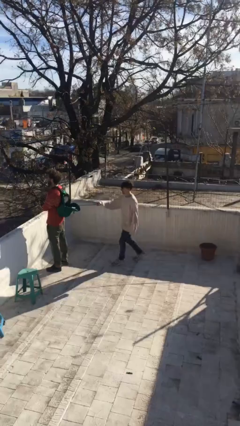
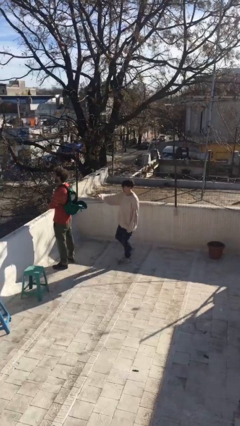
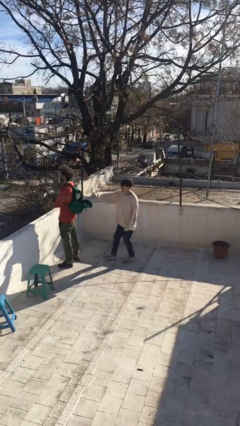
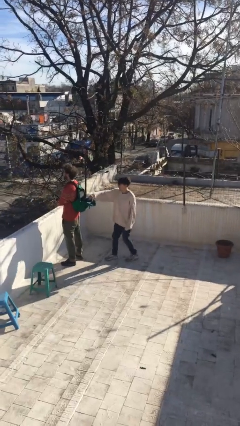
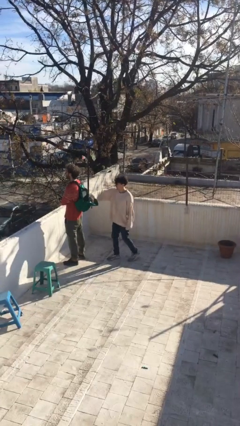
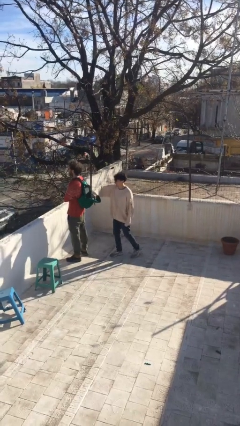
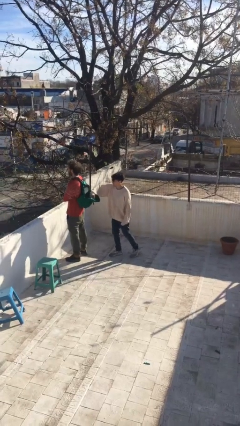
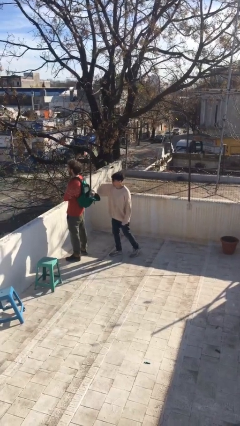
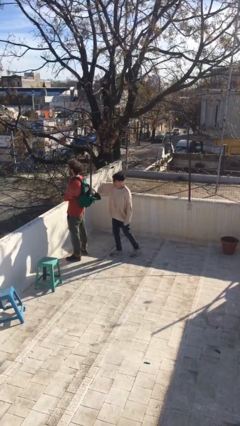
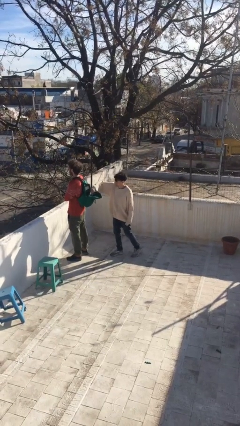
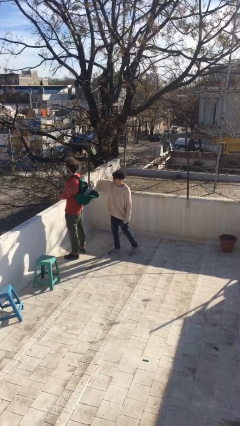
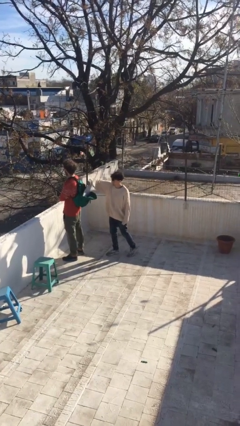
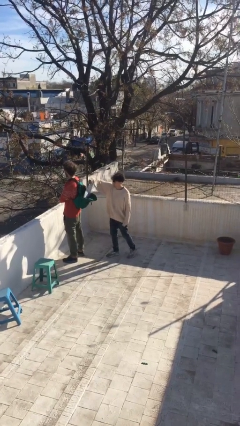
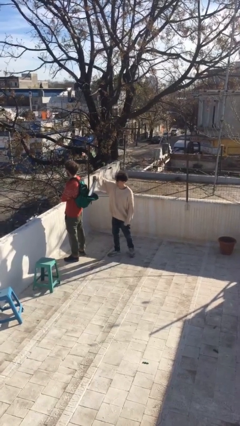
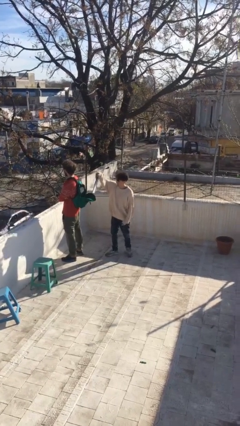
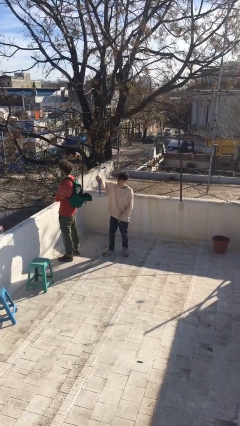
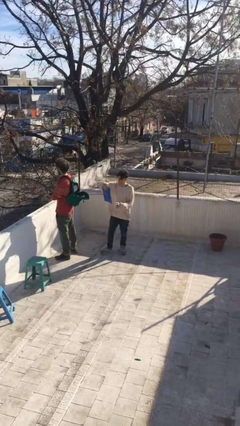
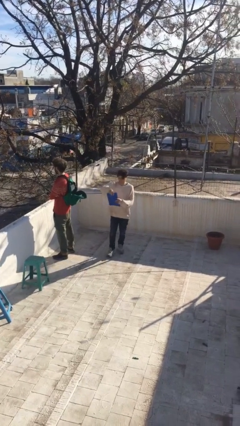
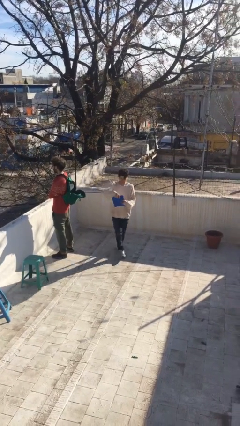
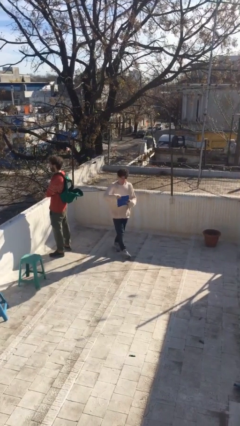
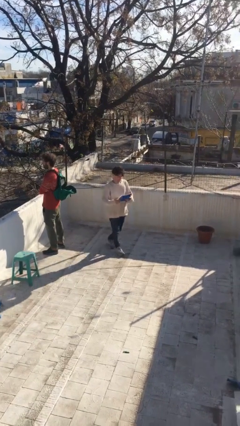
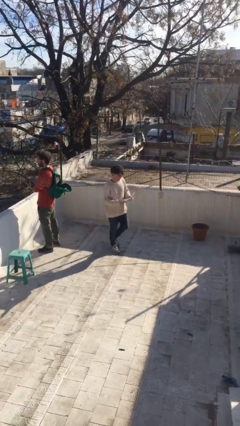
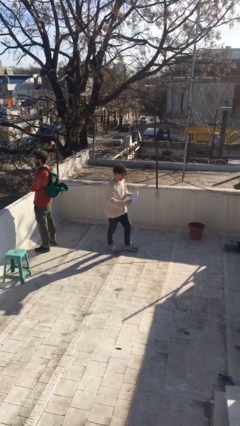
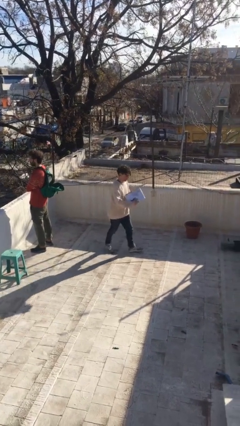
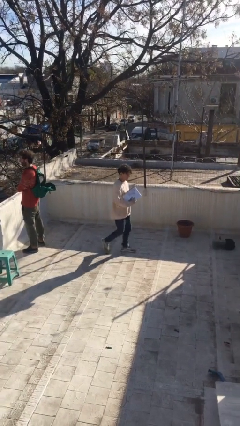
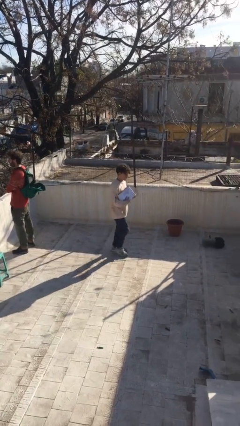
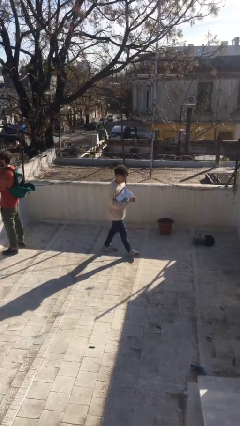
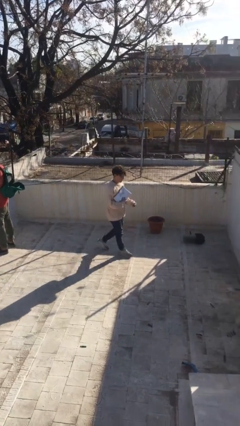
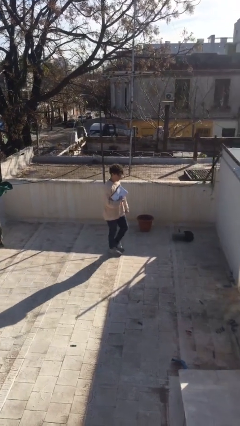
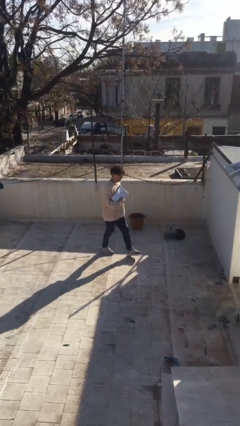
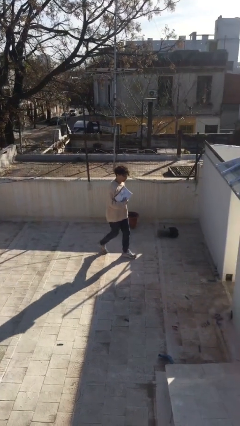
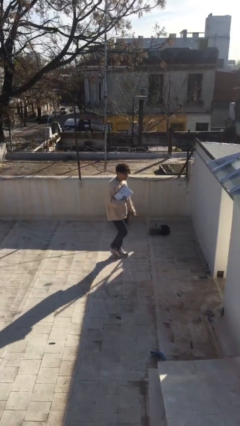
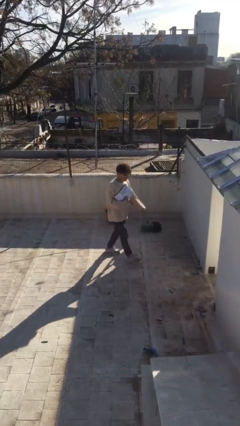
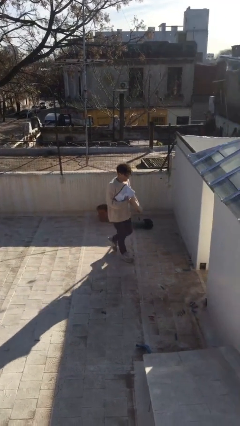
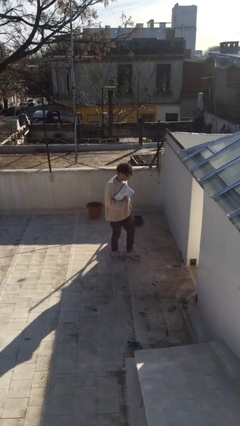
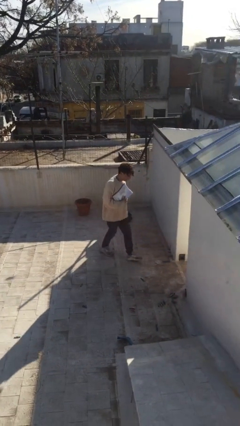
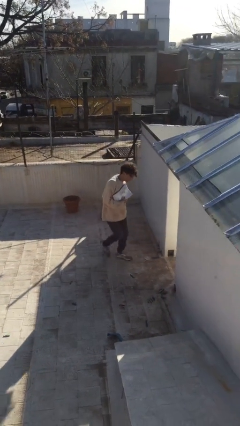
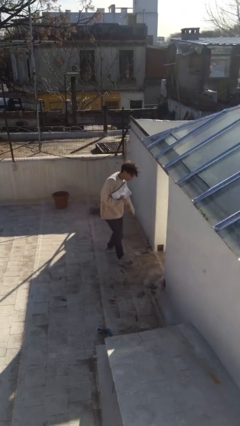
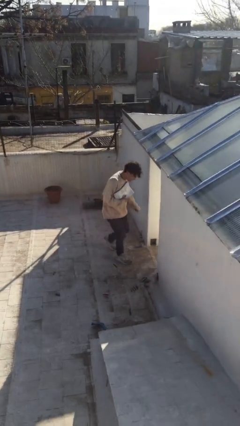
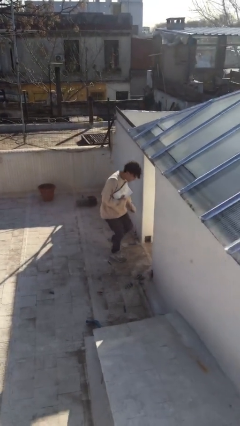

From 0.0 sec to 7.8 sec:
person steals object from person

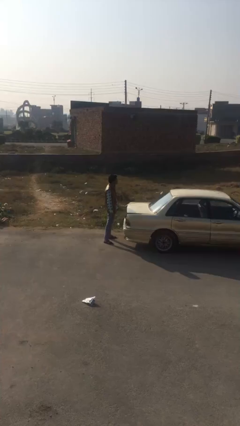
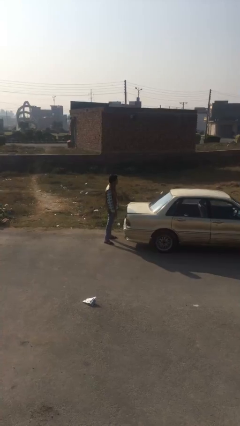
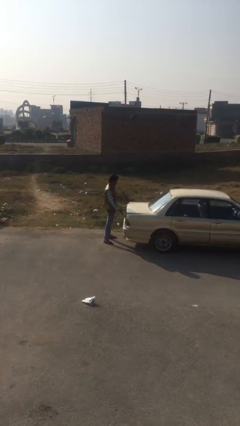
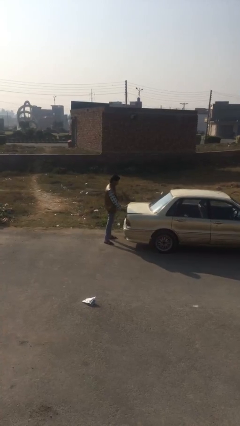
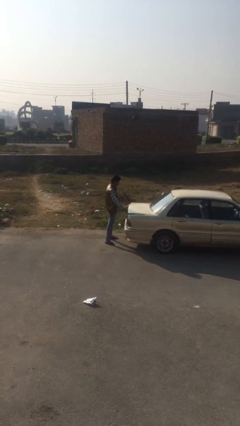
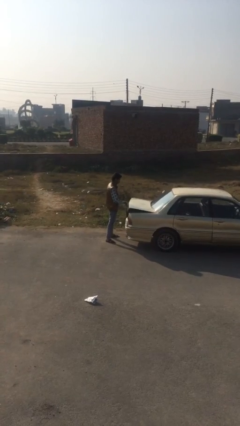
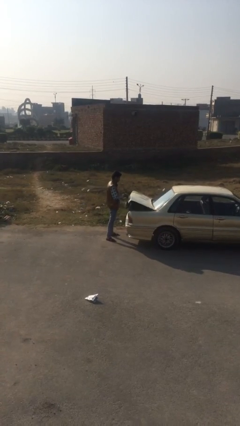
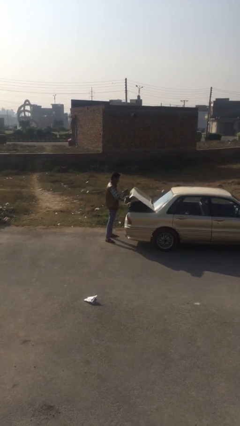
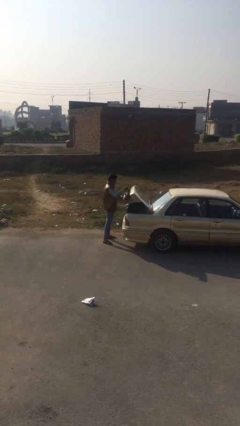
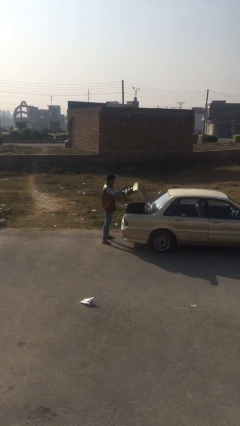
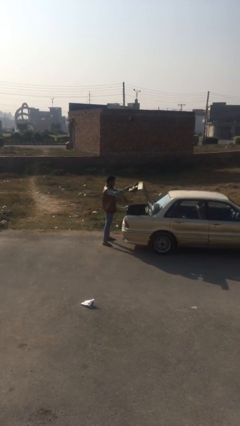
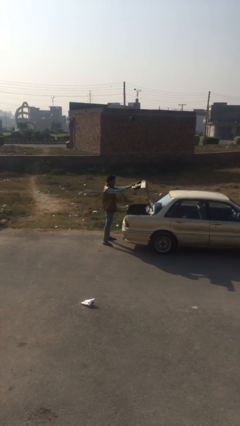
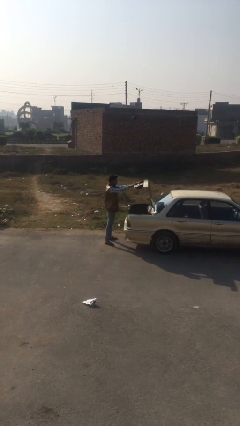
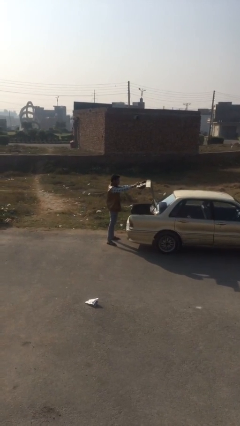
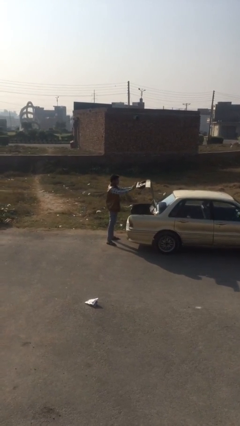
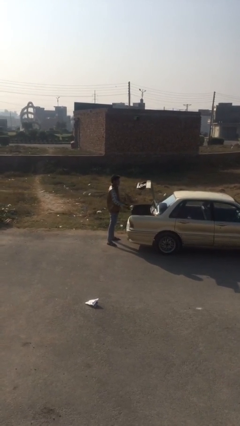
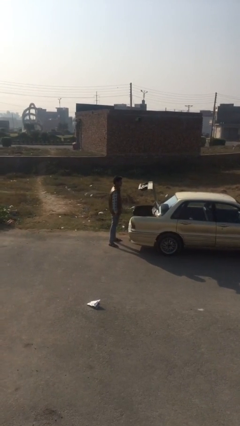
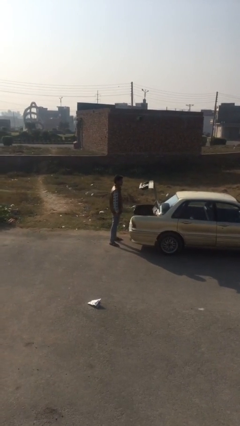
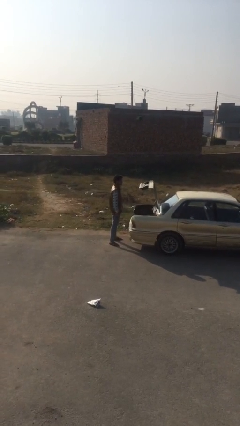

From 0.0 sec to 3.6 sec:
person opens car trunk

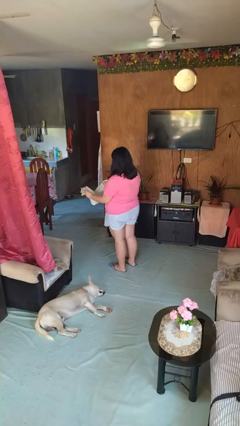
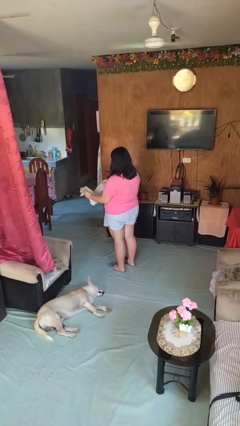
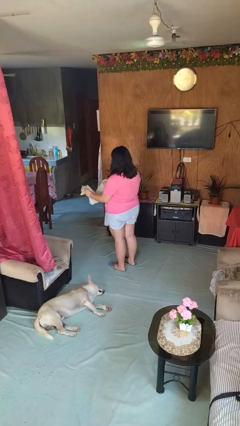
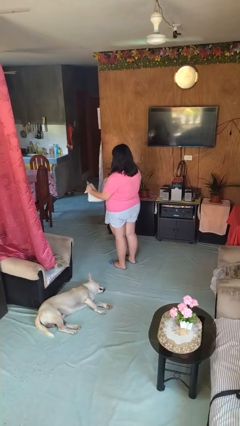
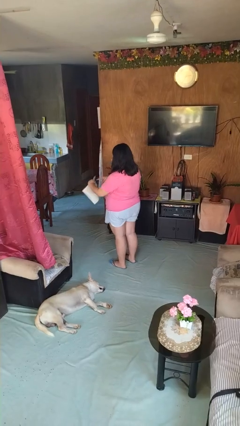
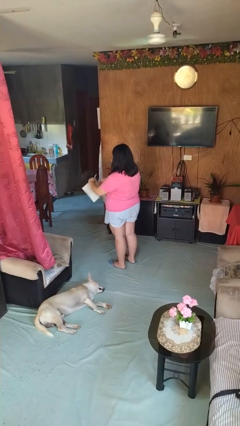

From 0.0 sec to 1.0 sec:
person tears paper

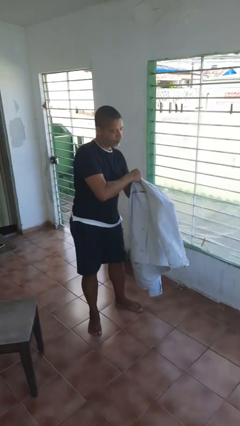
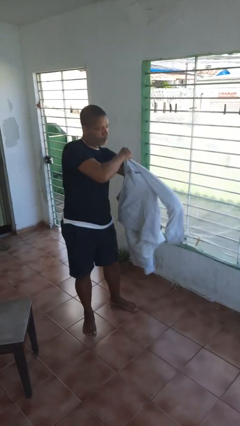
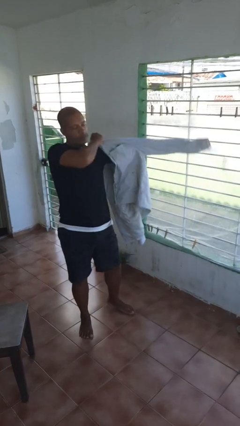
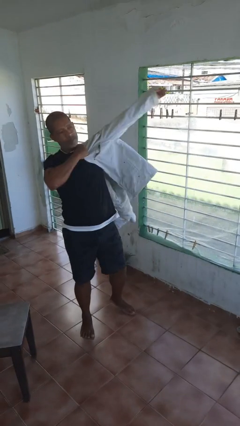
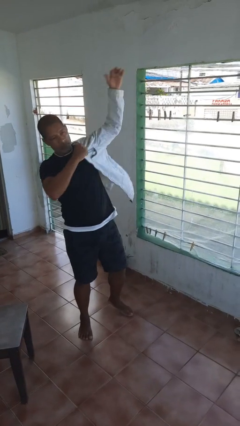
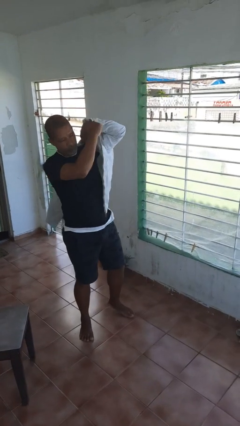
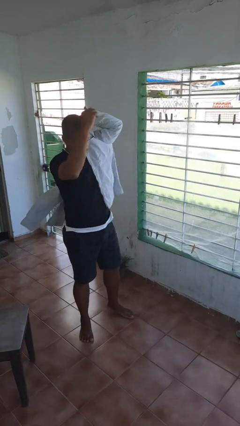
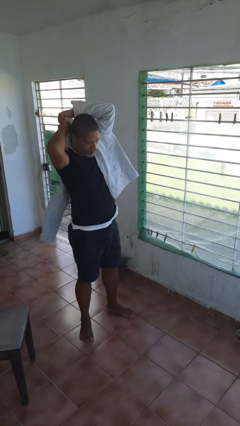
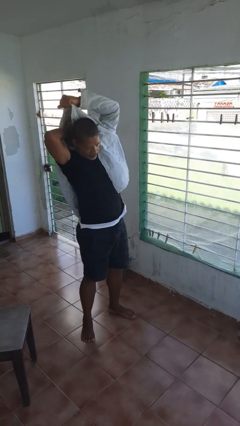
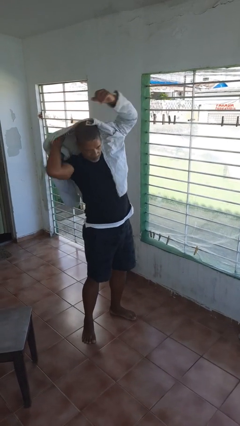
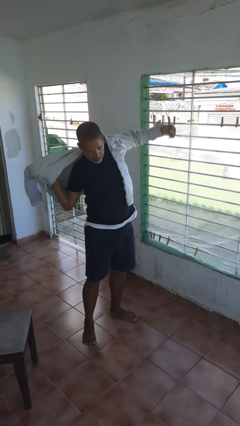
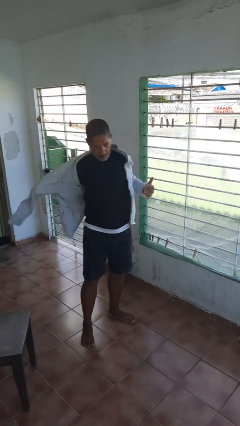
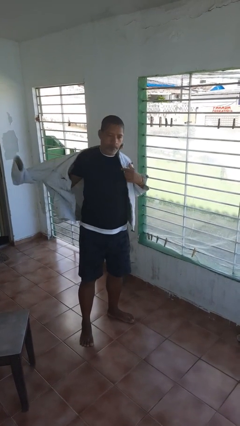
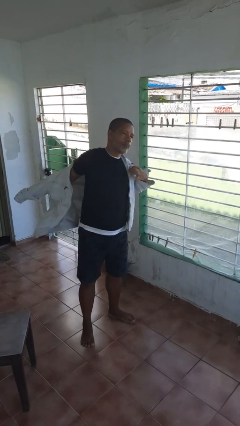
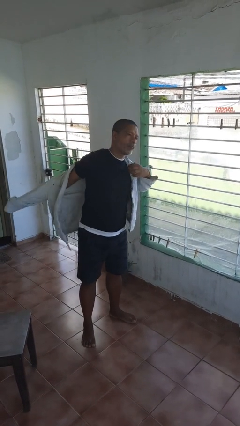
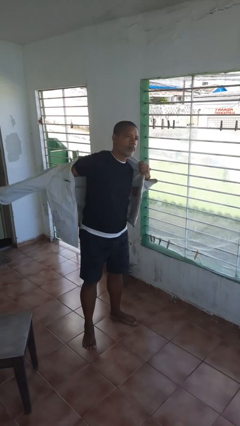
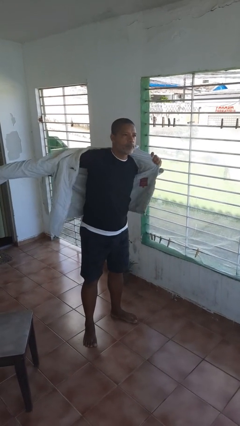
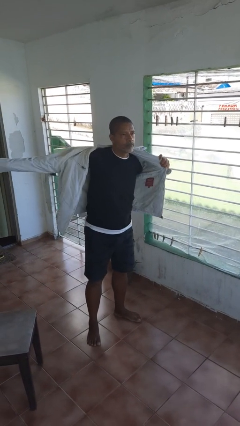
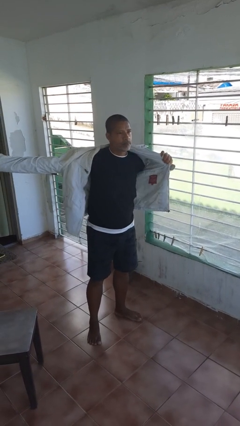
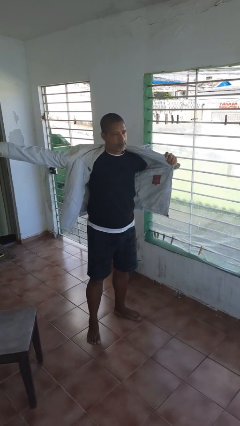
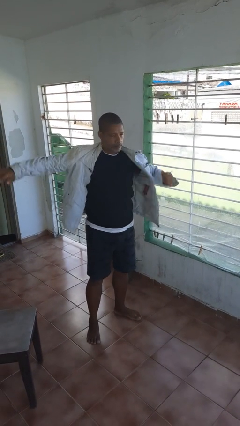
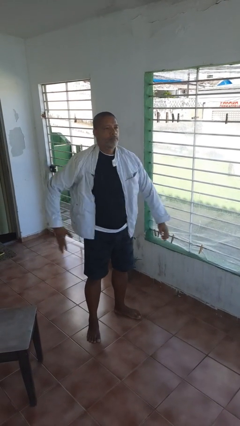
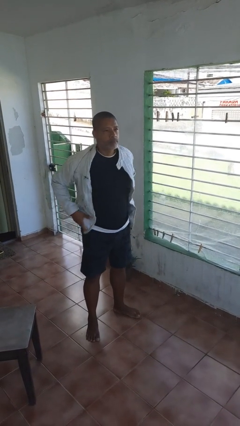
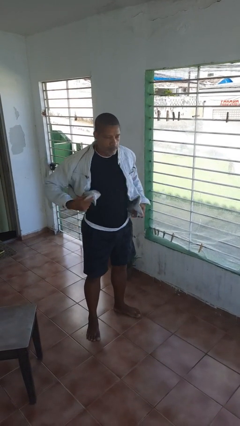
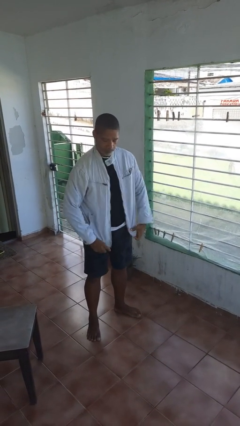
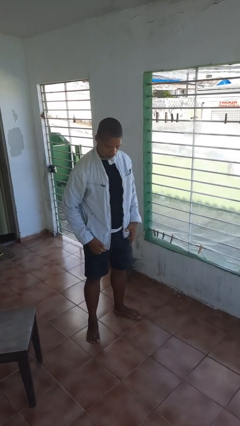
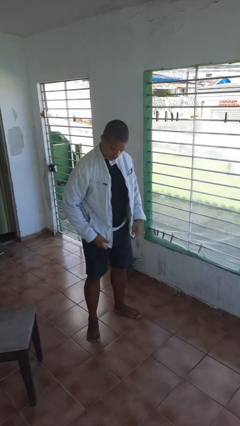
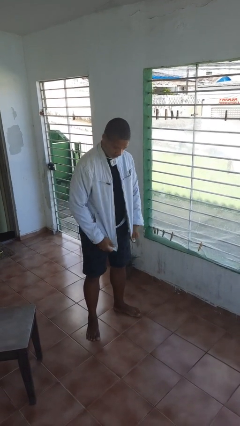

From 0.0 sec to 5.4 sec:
person puts on jacket

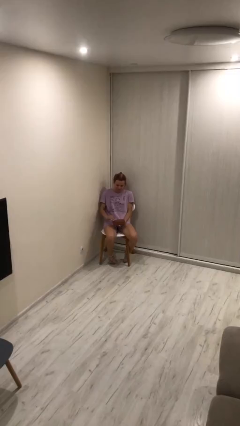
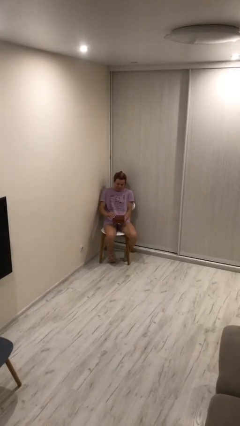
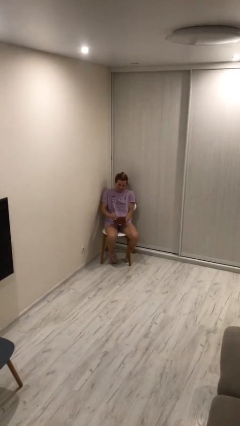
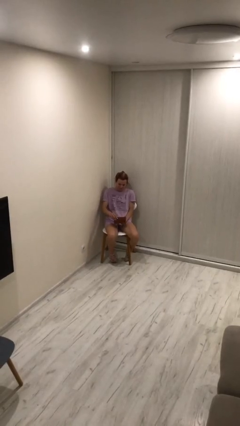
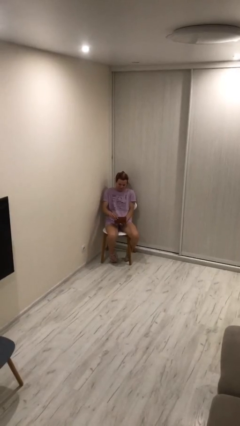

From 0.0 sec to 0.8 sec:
person opens jewelry box
